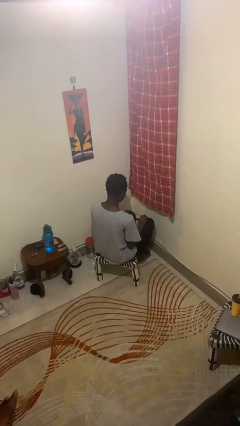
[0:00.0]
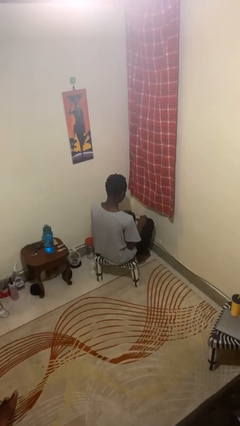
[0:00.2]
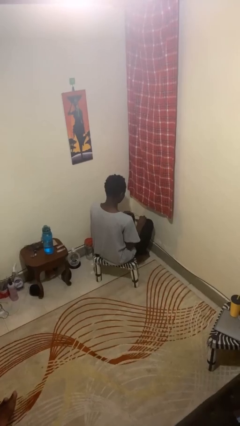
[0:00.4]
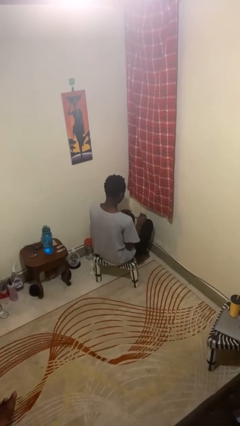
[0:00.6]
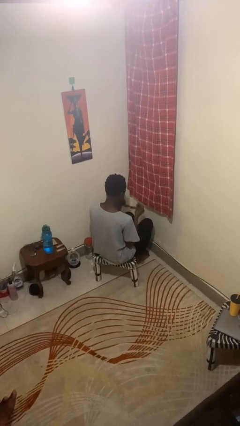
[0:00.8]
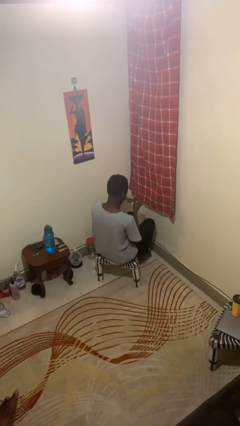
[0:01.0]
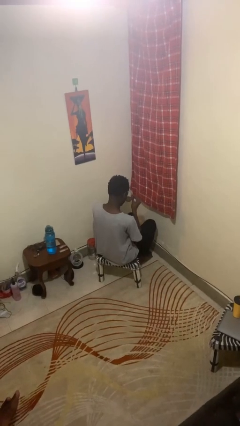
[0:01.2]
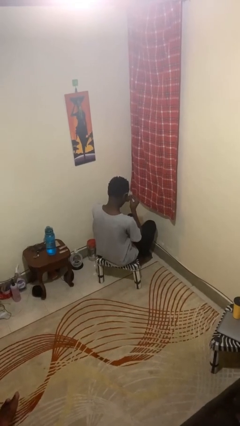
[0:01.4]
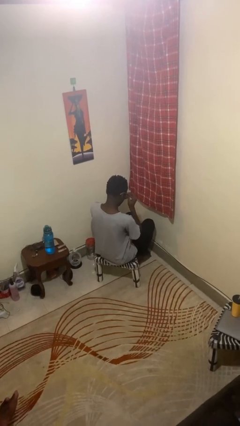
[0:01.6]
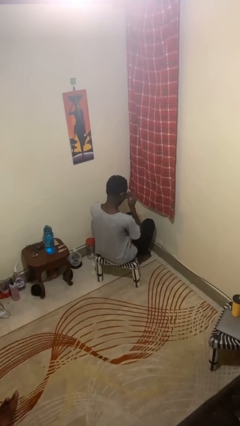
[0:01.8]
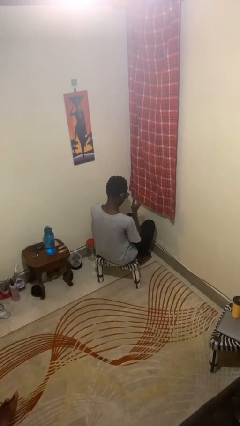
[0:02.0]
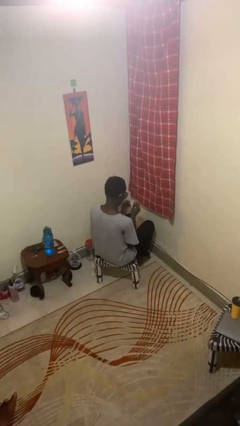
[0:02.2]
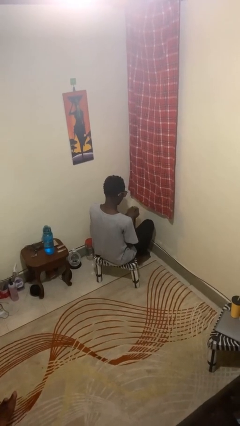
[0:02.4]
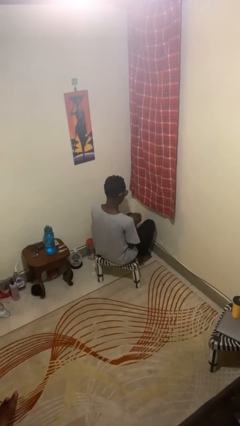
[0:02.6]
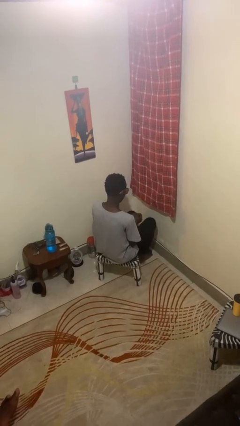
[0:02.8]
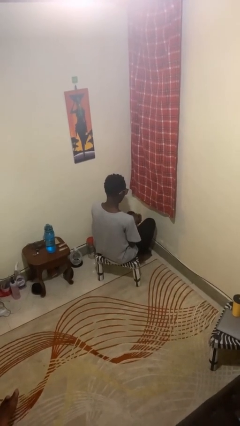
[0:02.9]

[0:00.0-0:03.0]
person puts on glasses

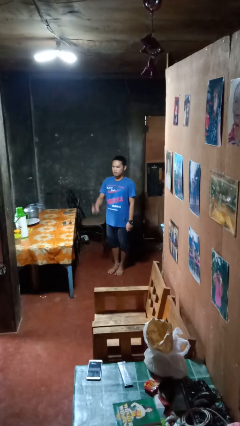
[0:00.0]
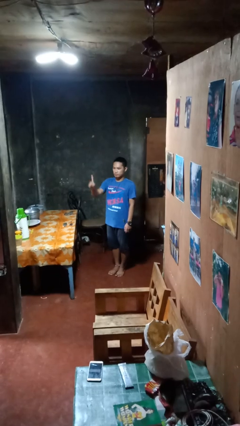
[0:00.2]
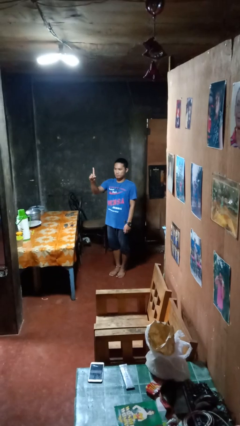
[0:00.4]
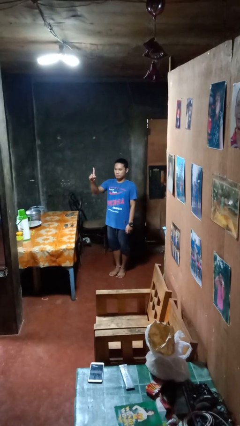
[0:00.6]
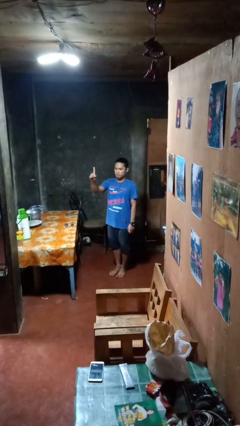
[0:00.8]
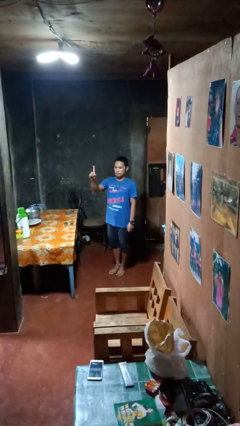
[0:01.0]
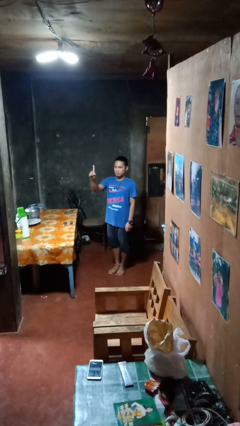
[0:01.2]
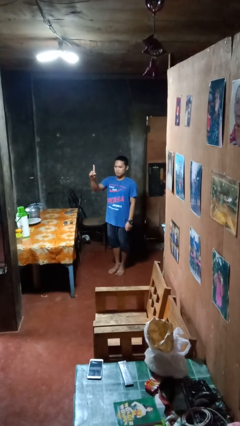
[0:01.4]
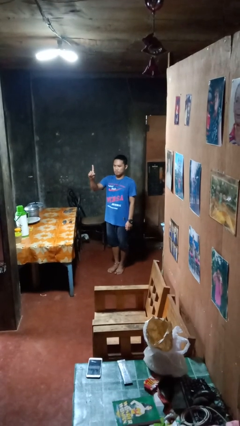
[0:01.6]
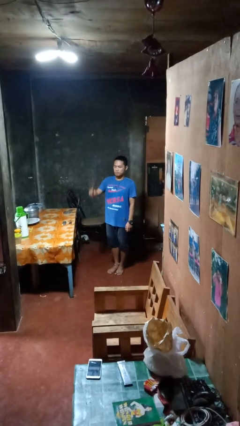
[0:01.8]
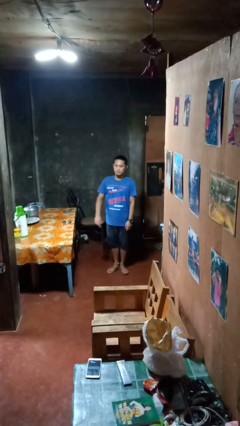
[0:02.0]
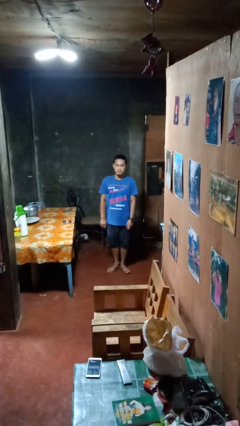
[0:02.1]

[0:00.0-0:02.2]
person gestures number one

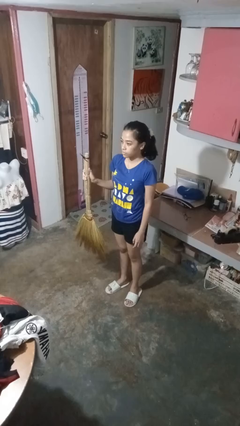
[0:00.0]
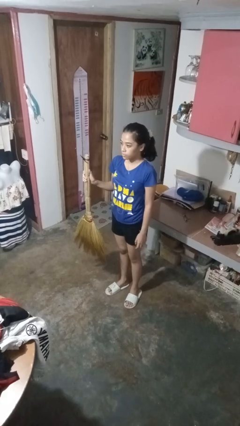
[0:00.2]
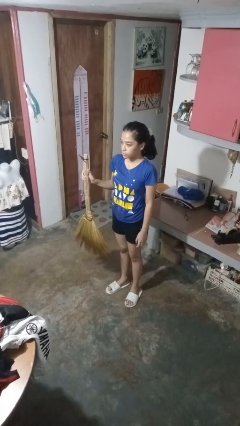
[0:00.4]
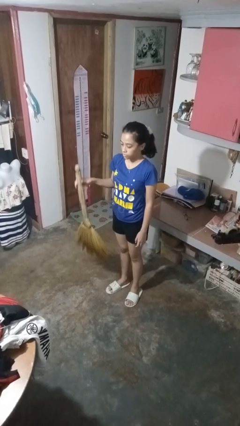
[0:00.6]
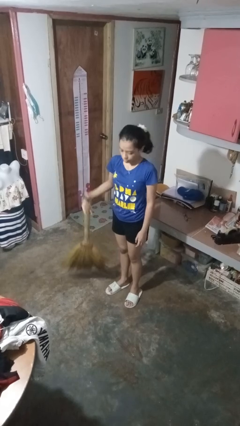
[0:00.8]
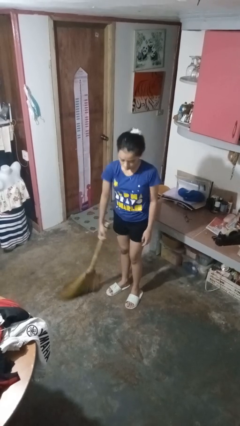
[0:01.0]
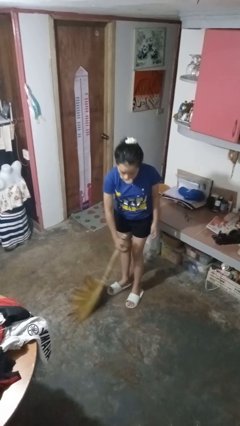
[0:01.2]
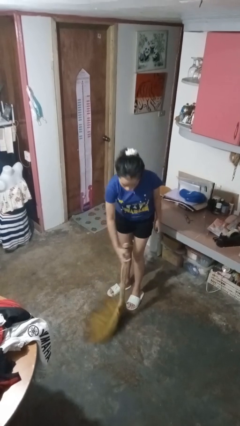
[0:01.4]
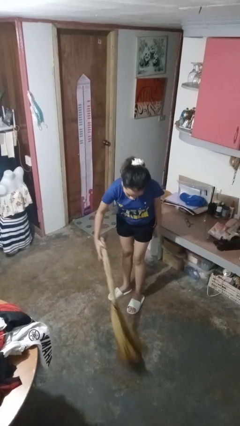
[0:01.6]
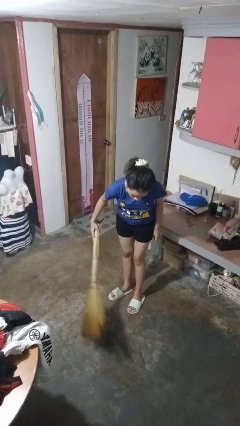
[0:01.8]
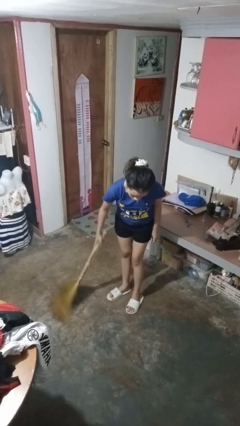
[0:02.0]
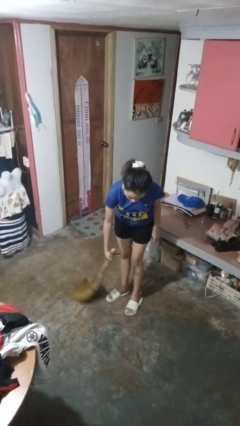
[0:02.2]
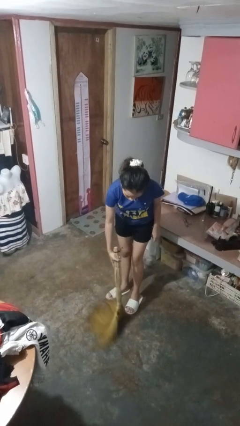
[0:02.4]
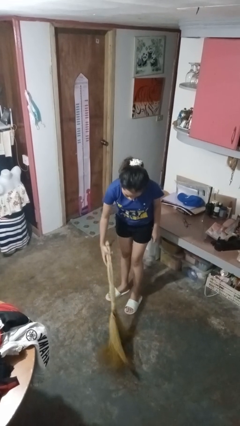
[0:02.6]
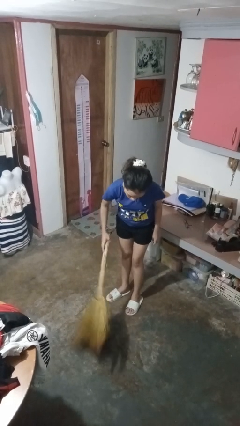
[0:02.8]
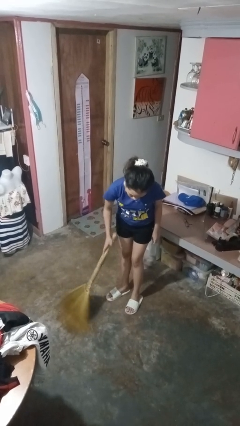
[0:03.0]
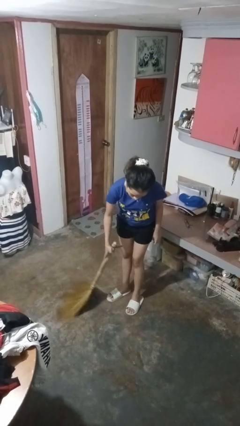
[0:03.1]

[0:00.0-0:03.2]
person sweeps floor

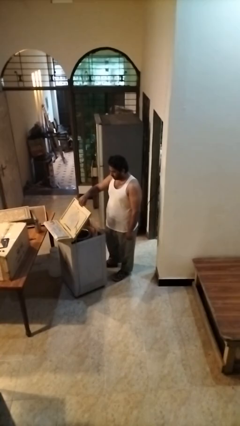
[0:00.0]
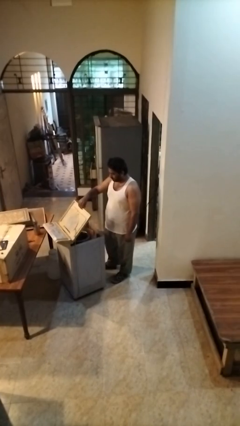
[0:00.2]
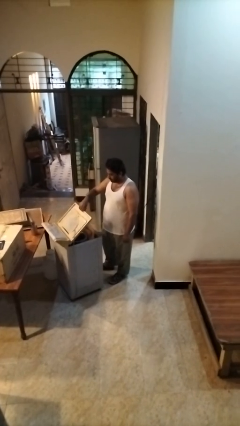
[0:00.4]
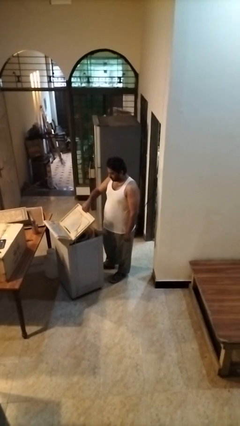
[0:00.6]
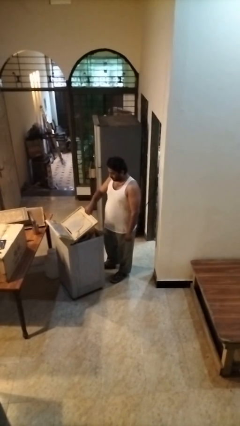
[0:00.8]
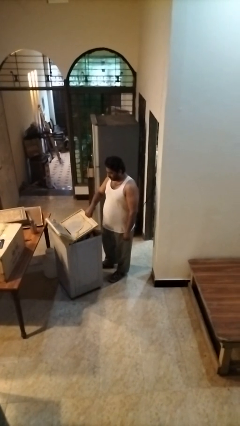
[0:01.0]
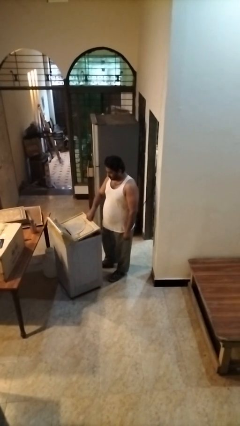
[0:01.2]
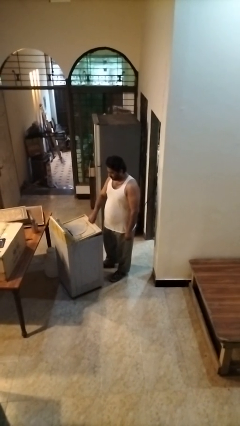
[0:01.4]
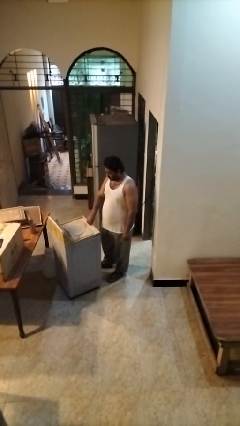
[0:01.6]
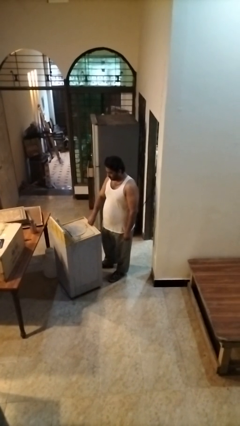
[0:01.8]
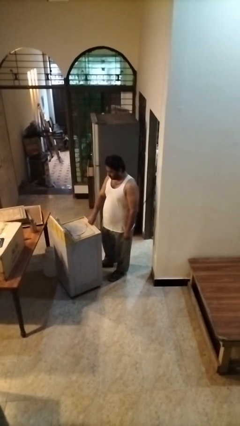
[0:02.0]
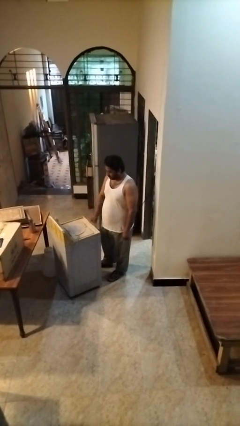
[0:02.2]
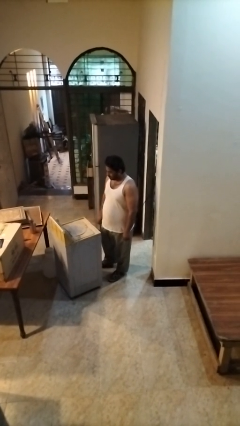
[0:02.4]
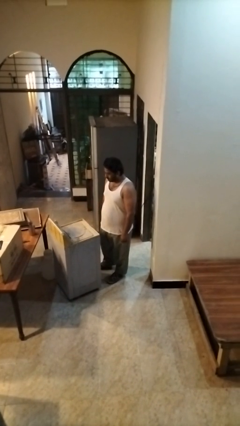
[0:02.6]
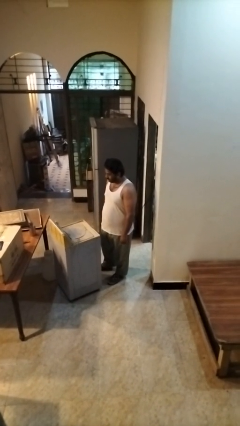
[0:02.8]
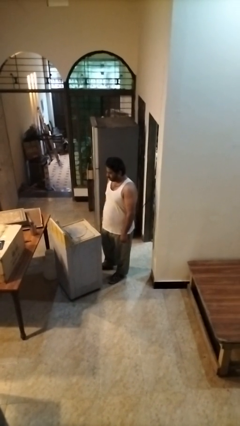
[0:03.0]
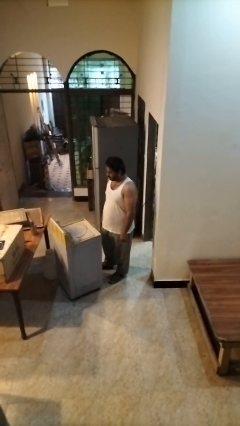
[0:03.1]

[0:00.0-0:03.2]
person closes clothes washer

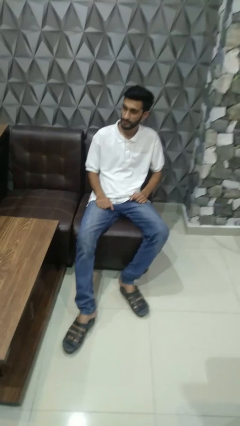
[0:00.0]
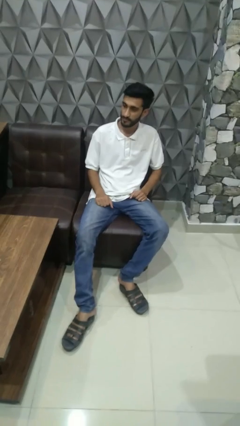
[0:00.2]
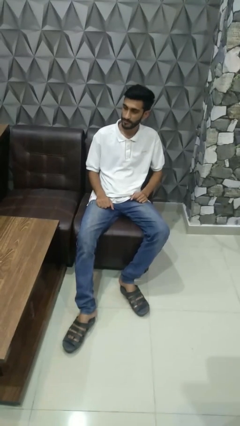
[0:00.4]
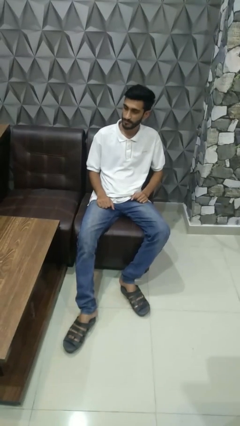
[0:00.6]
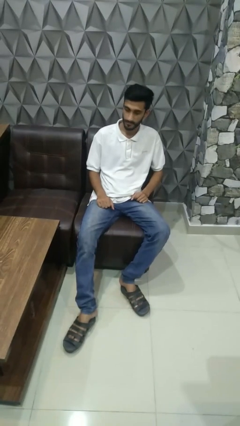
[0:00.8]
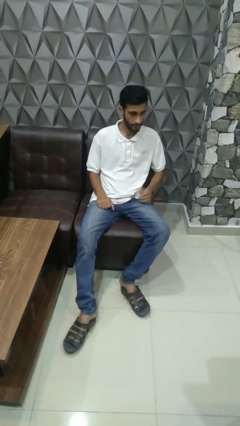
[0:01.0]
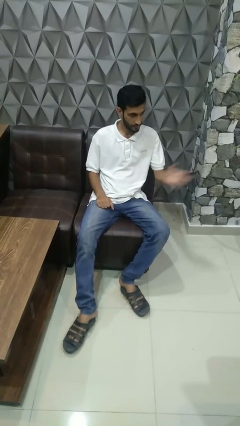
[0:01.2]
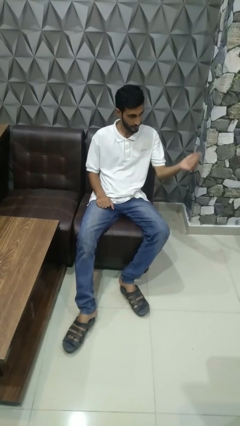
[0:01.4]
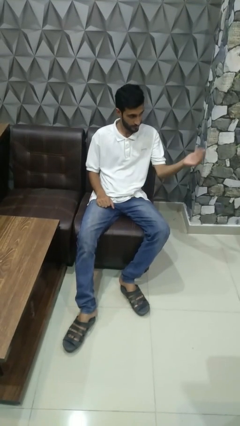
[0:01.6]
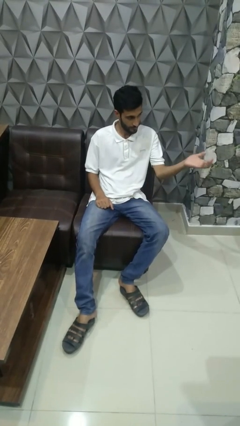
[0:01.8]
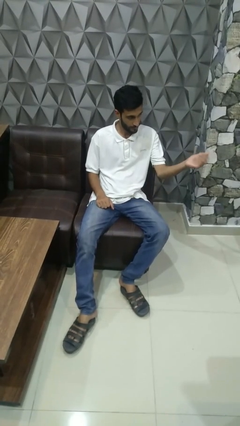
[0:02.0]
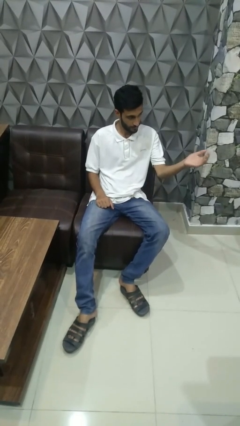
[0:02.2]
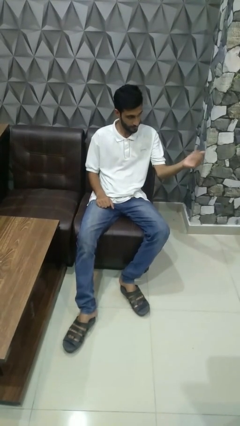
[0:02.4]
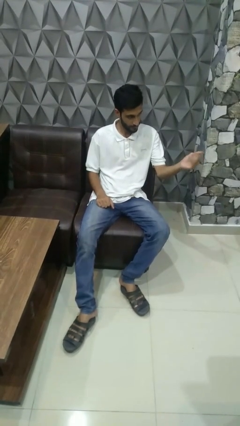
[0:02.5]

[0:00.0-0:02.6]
person gestures come here

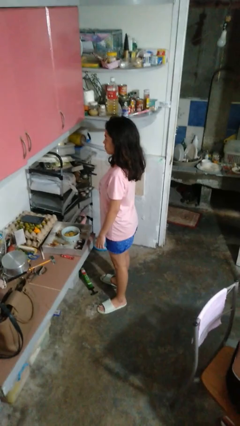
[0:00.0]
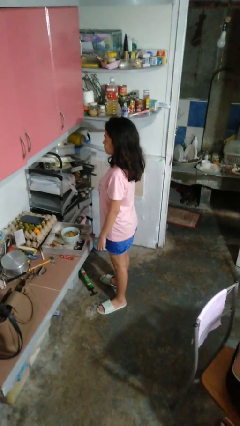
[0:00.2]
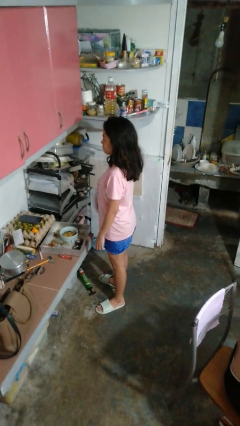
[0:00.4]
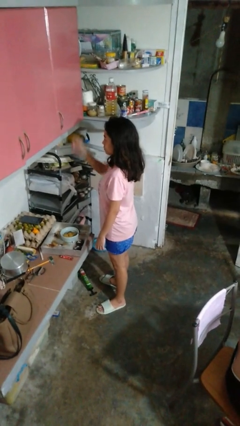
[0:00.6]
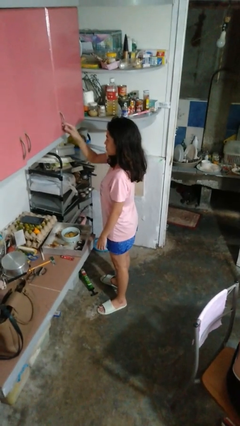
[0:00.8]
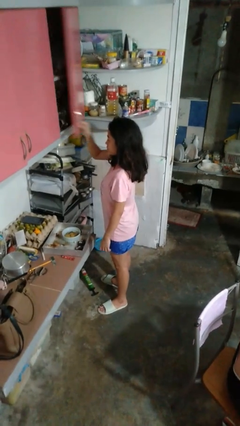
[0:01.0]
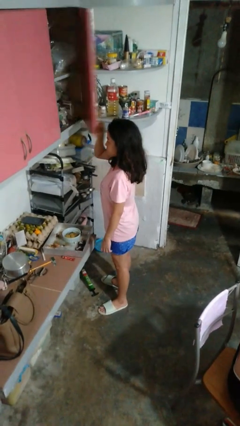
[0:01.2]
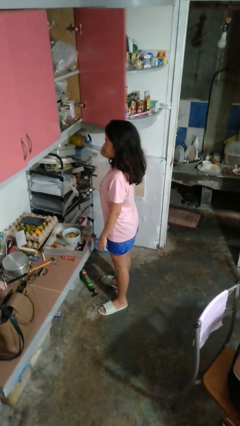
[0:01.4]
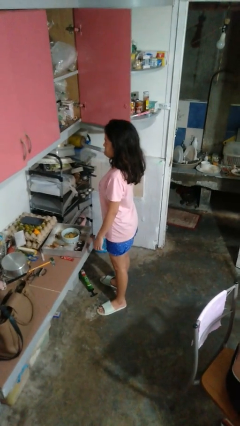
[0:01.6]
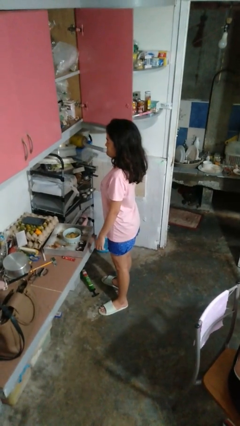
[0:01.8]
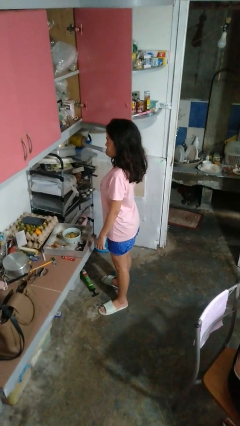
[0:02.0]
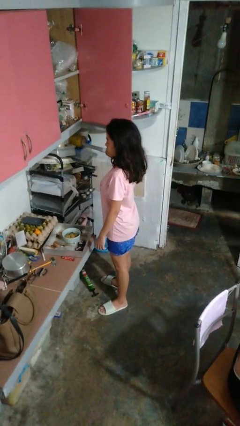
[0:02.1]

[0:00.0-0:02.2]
person opens cabinet

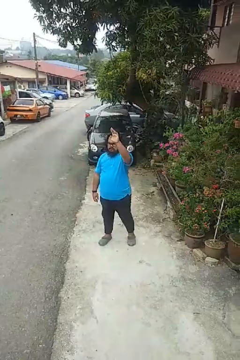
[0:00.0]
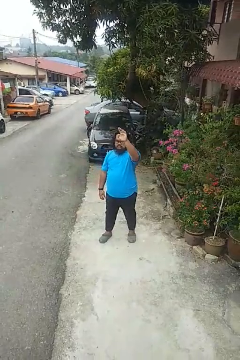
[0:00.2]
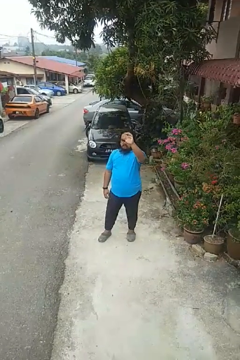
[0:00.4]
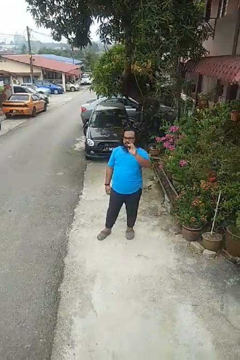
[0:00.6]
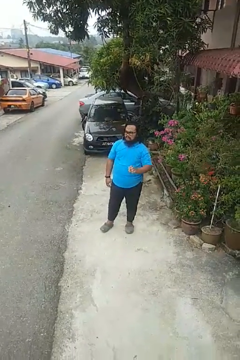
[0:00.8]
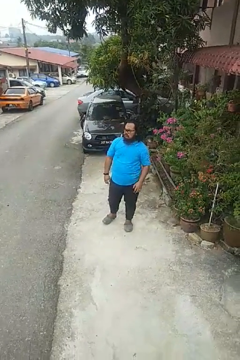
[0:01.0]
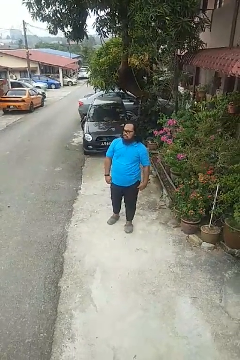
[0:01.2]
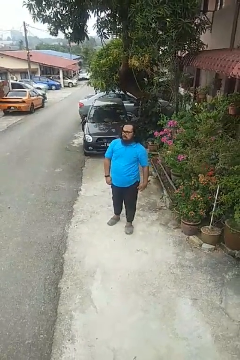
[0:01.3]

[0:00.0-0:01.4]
person gestures lower hand
